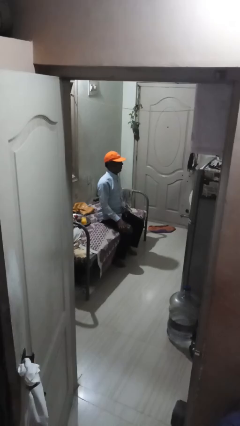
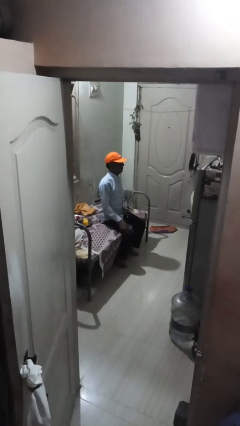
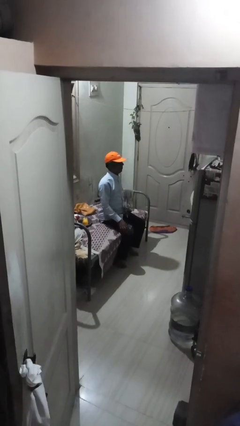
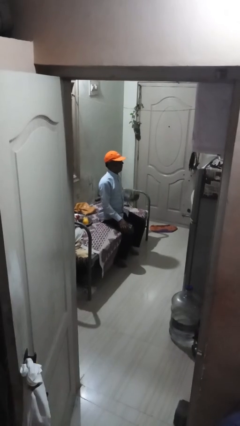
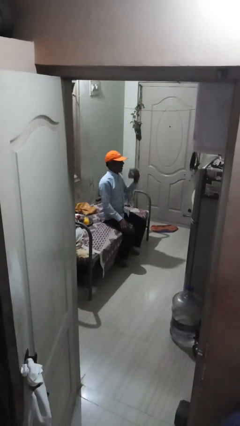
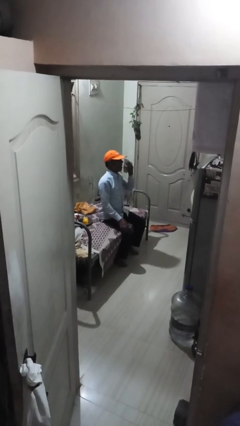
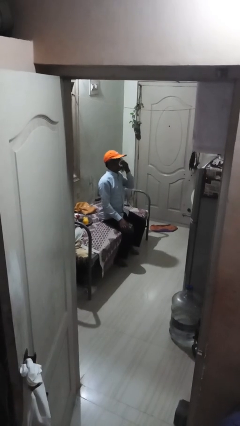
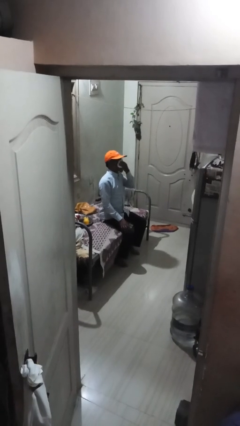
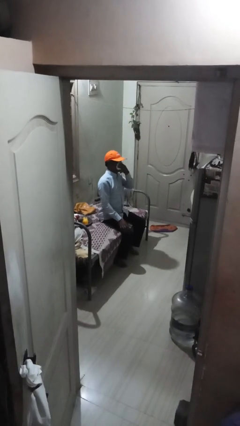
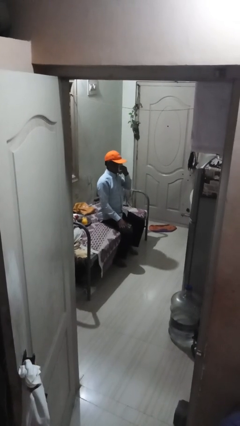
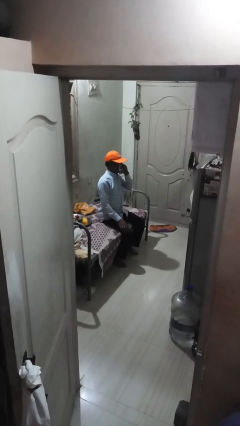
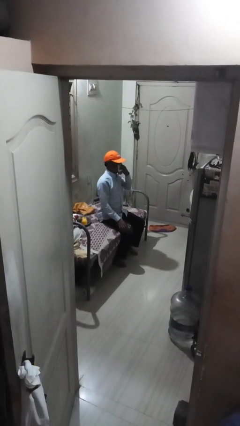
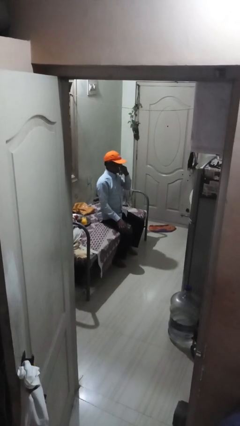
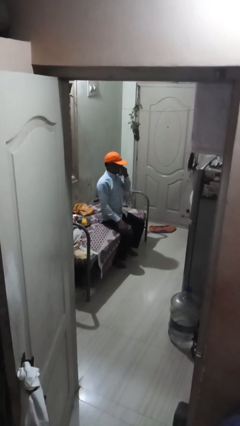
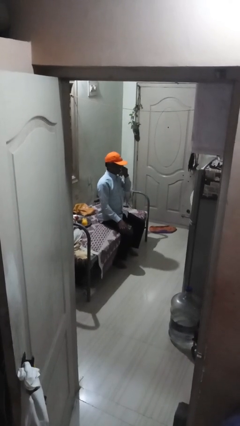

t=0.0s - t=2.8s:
person blows nose

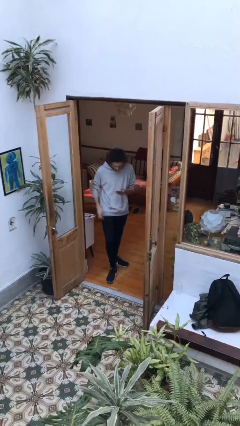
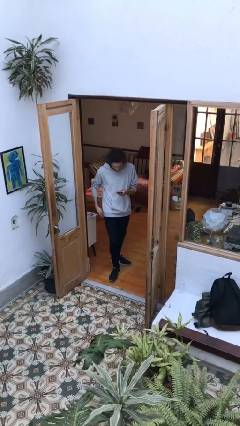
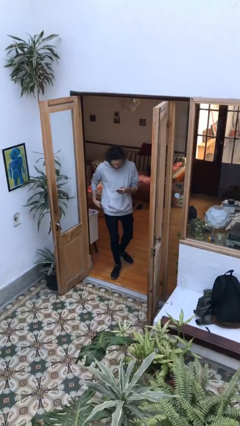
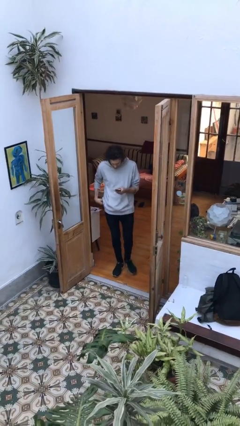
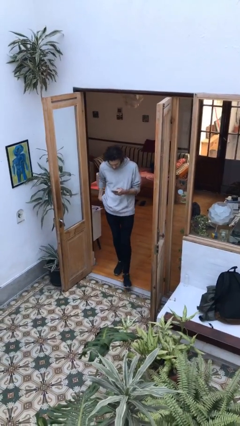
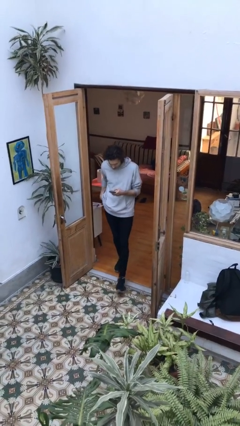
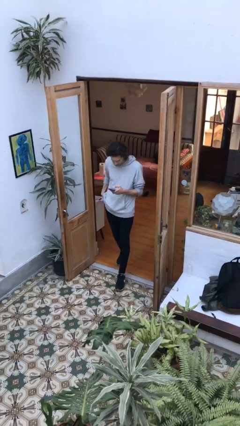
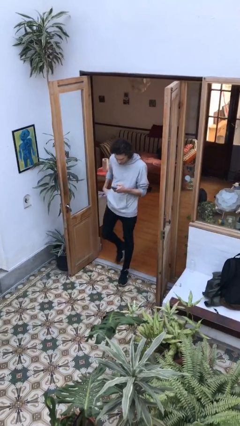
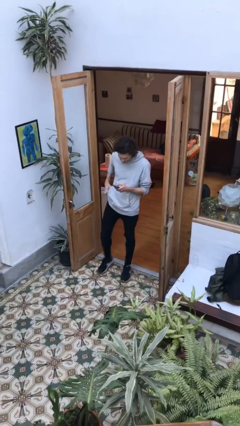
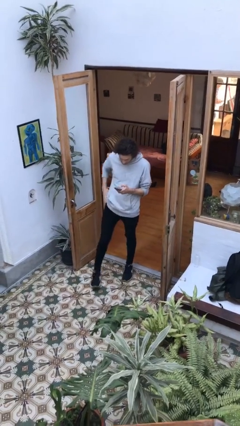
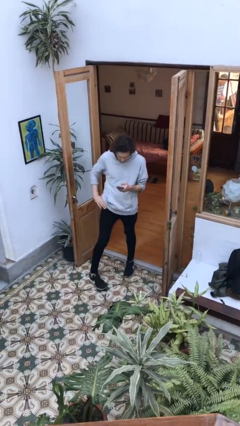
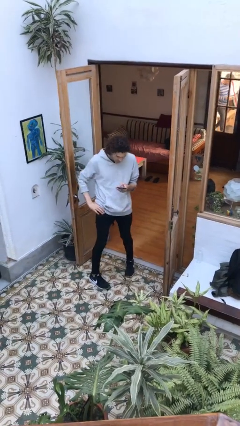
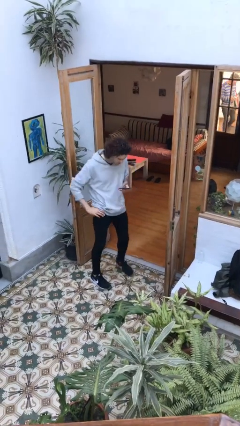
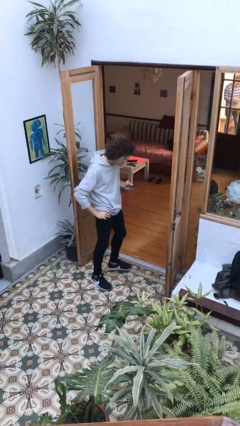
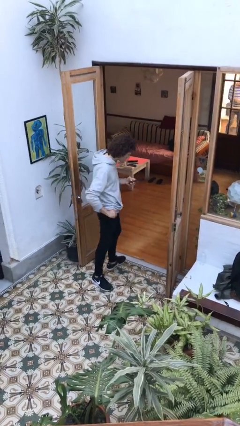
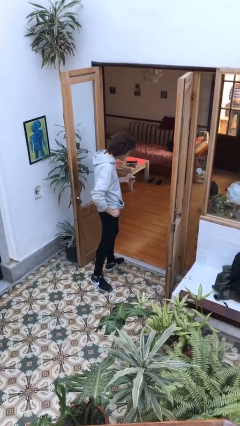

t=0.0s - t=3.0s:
person enters scene through structure

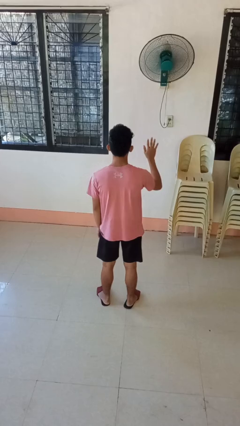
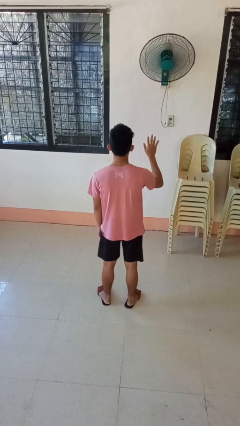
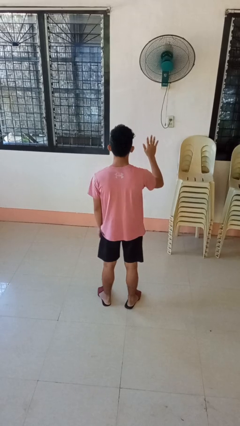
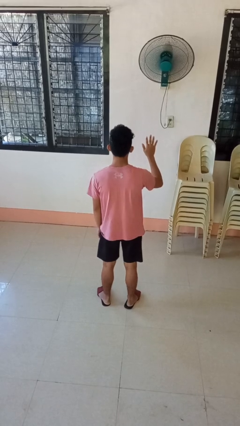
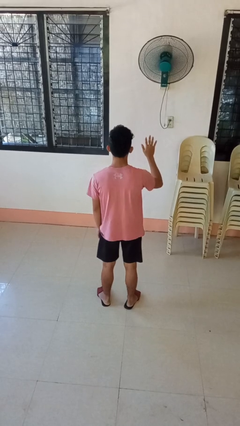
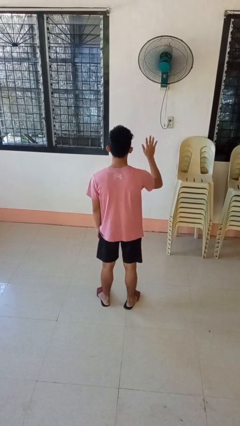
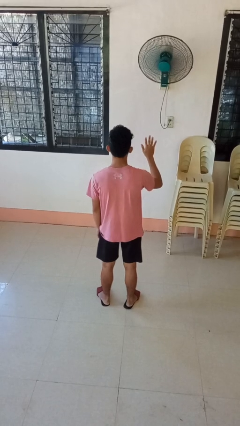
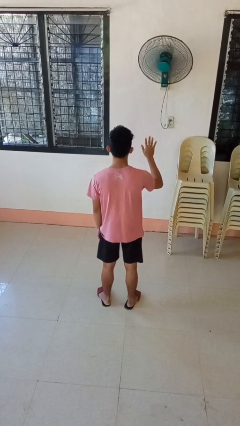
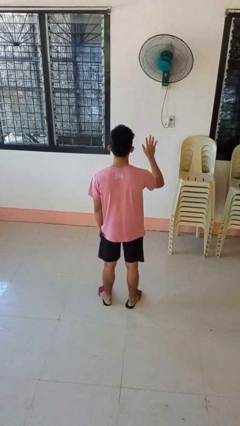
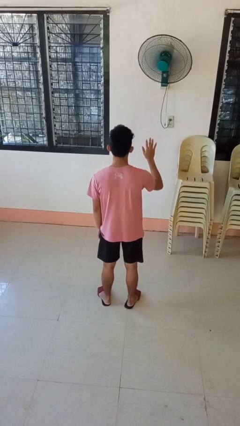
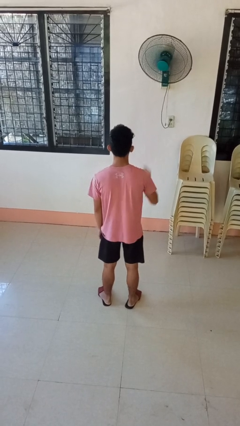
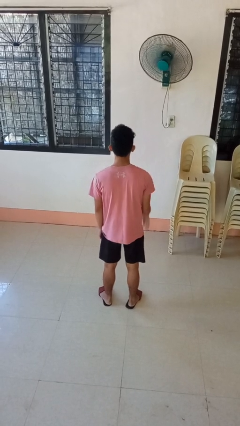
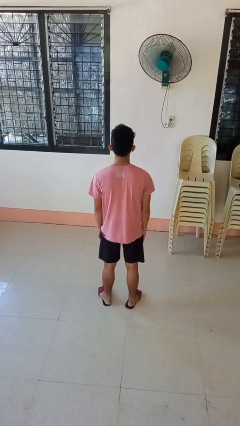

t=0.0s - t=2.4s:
person gestures number five

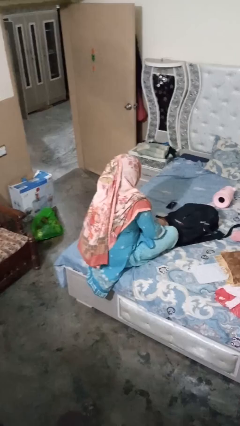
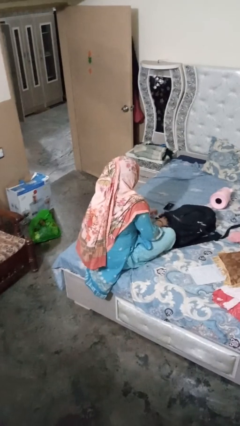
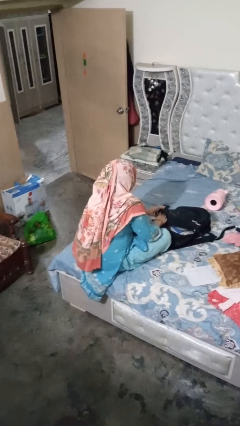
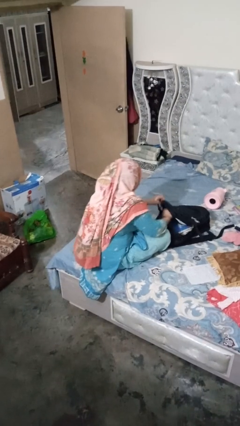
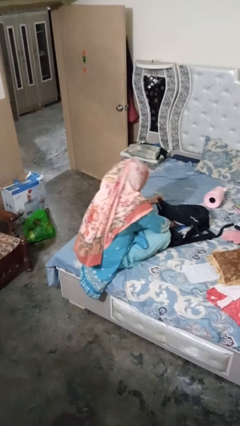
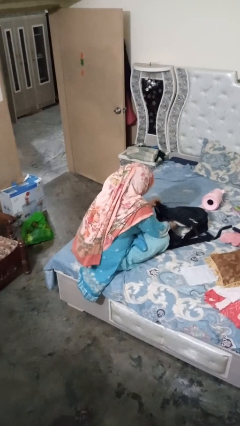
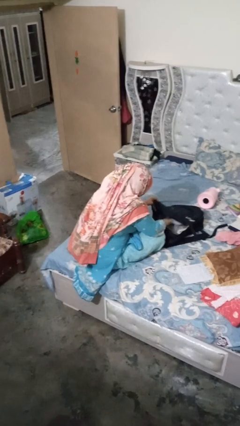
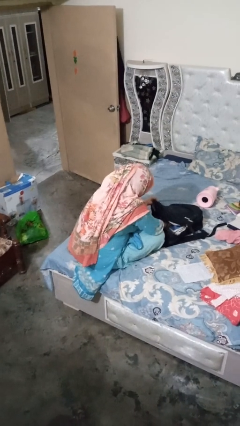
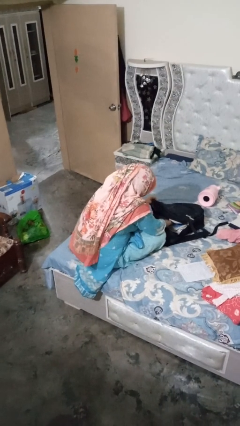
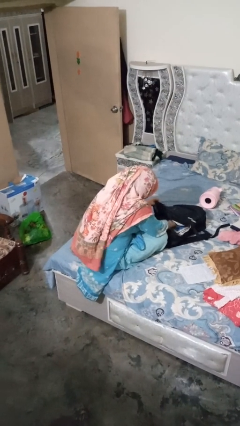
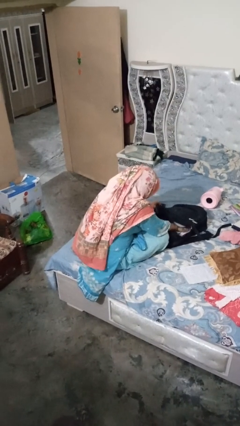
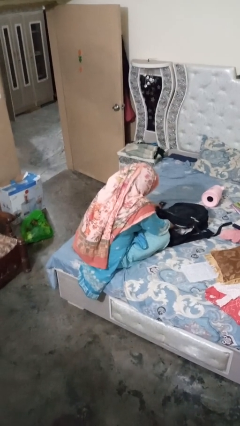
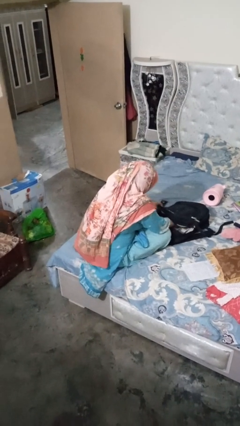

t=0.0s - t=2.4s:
person searches in bag

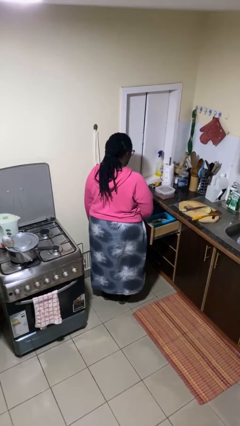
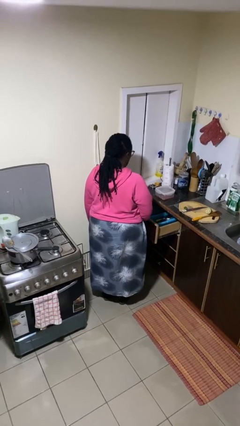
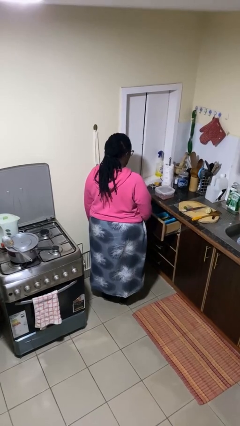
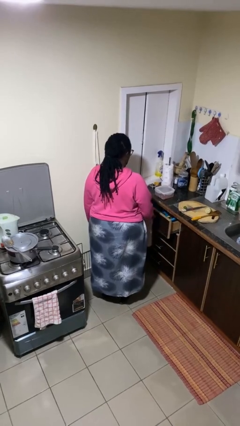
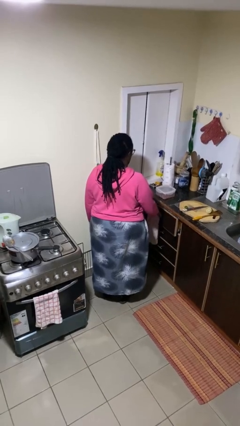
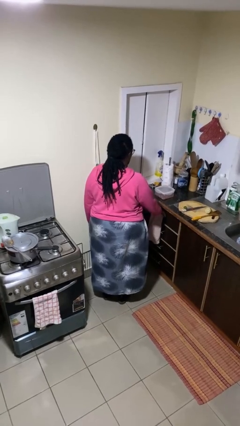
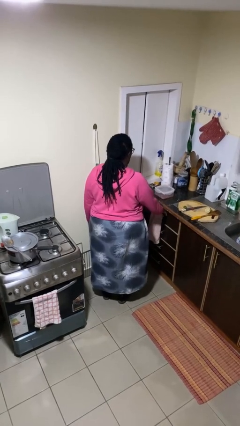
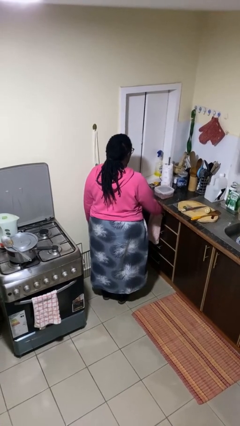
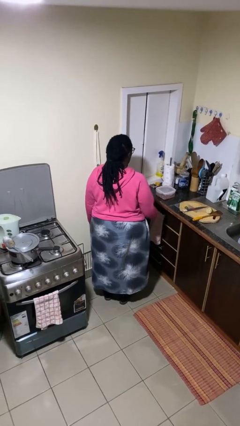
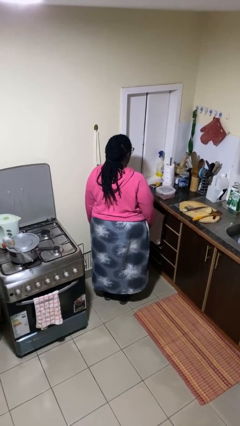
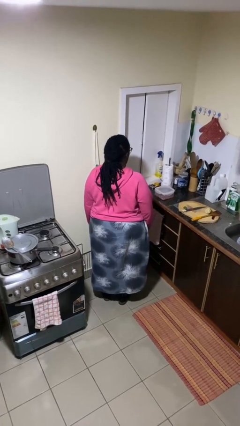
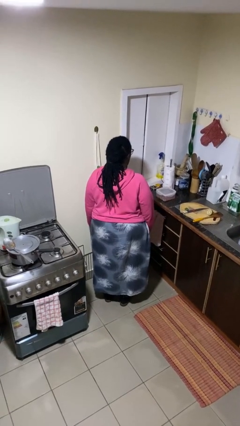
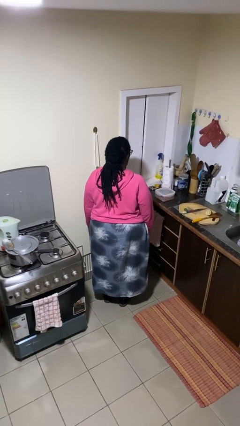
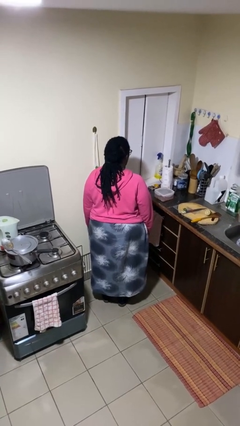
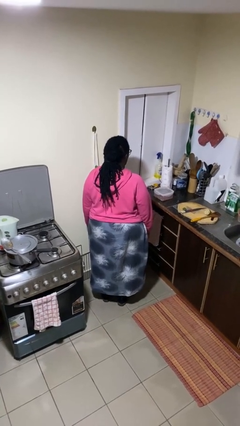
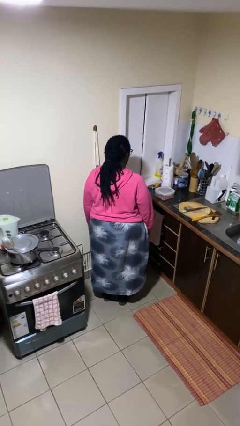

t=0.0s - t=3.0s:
person closes kitchen drawer

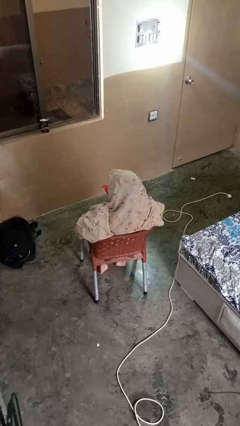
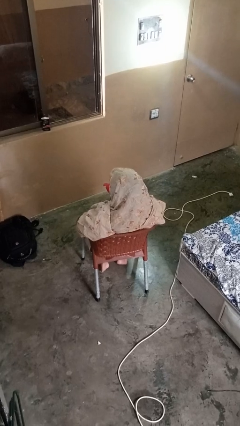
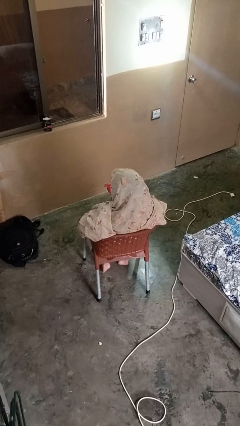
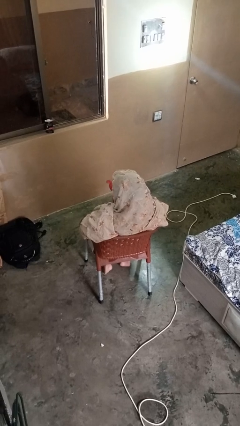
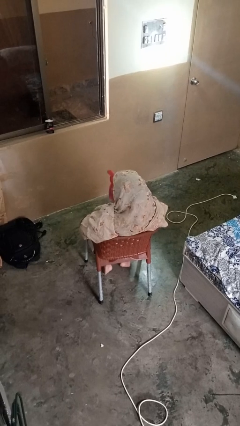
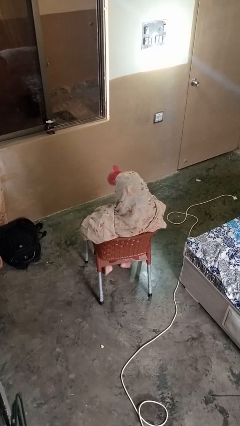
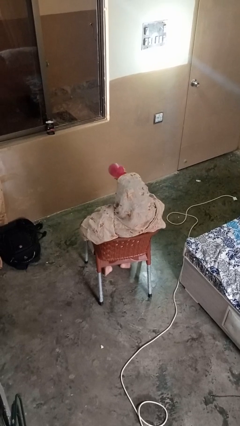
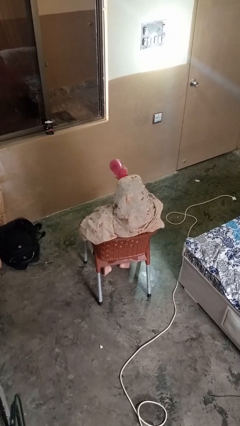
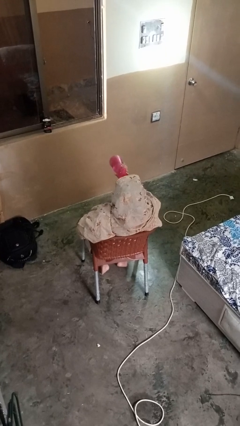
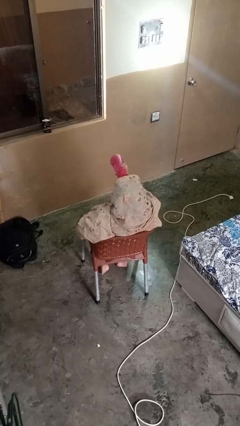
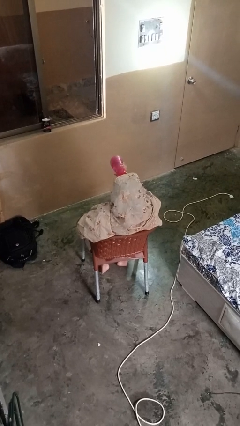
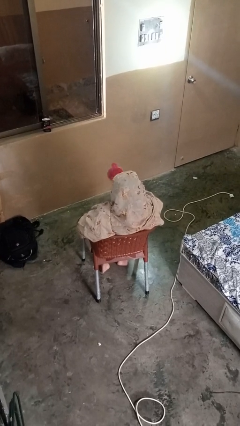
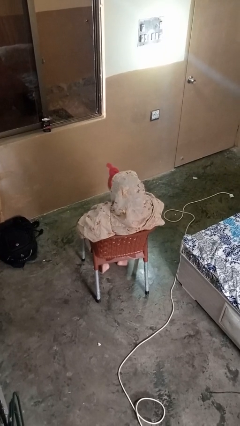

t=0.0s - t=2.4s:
person drinks from bottle

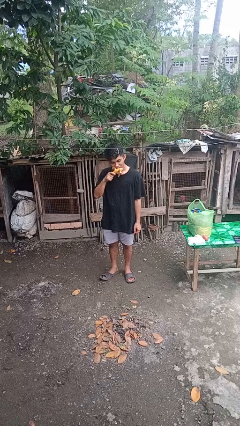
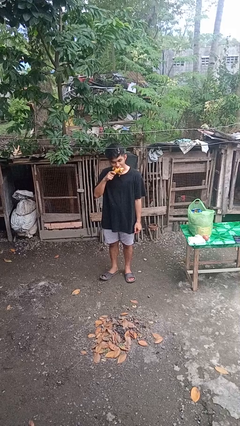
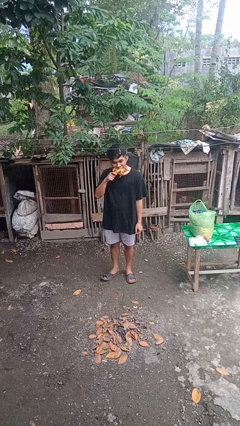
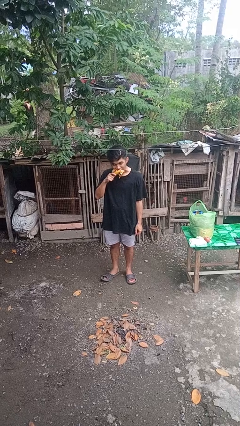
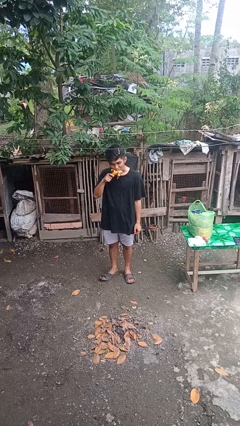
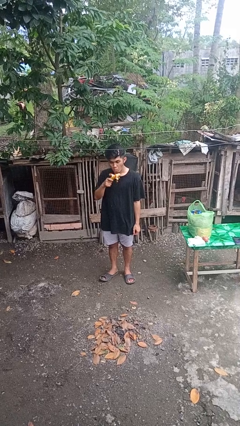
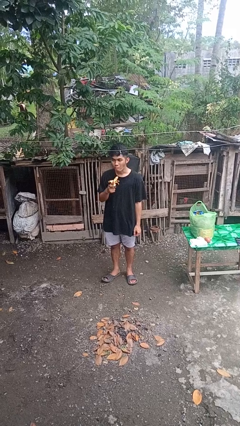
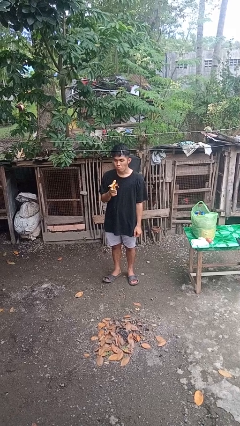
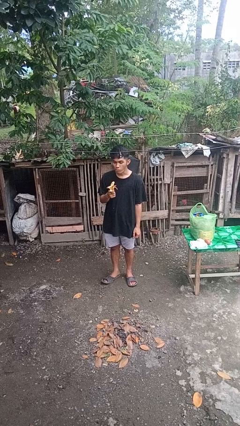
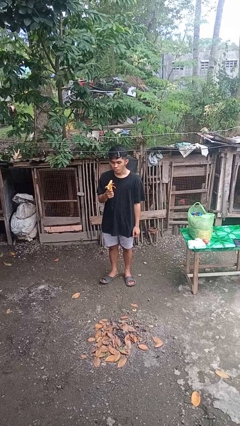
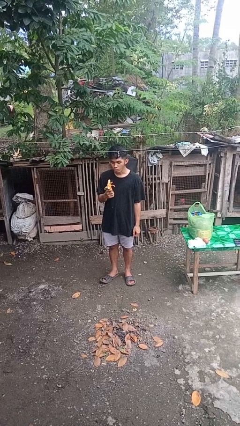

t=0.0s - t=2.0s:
person eats banana
